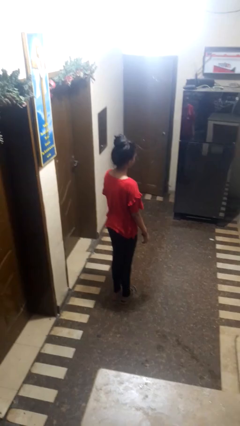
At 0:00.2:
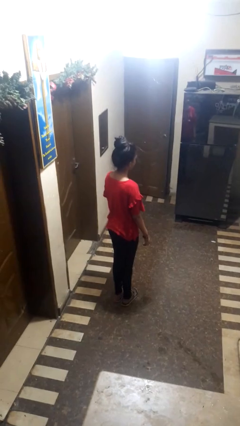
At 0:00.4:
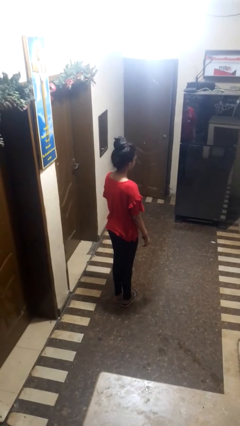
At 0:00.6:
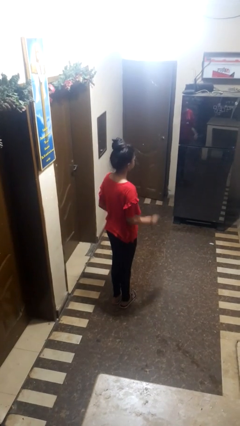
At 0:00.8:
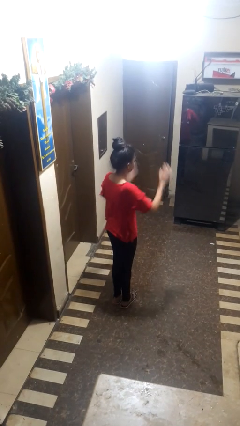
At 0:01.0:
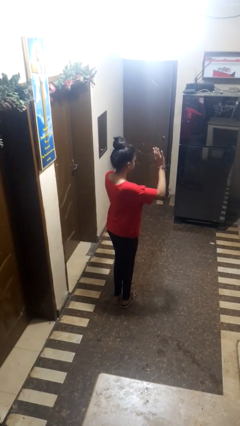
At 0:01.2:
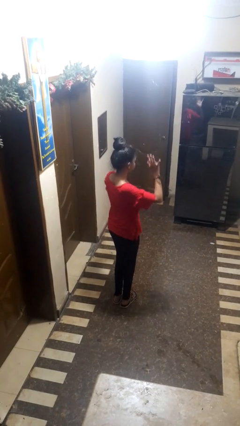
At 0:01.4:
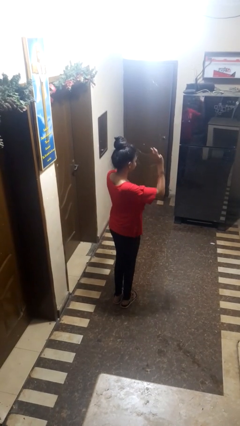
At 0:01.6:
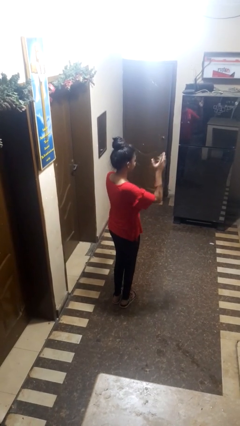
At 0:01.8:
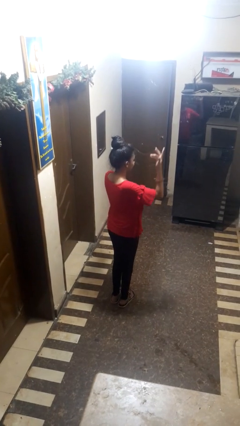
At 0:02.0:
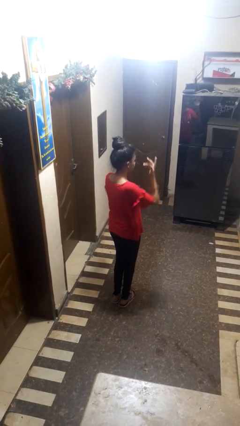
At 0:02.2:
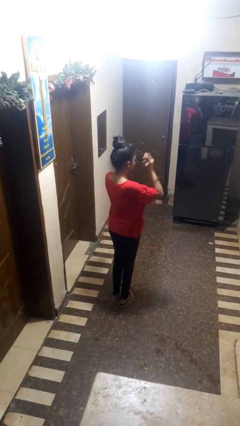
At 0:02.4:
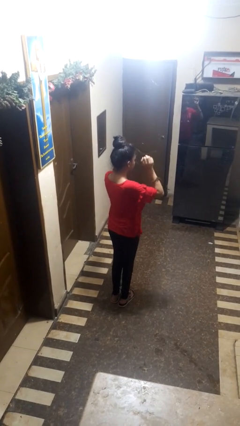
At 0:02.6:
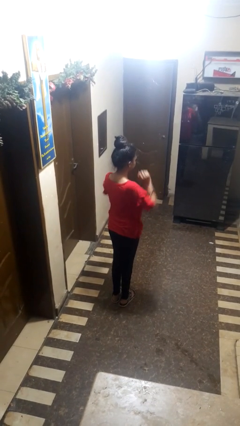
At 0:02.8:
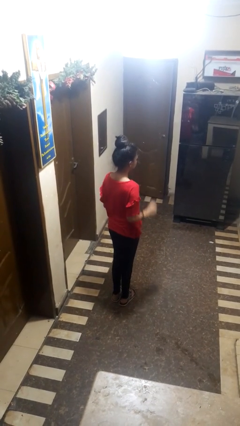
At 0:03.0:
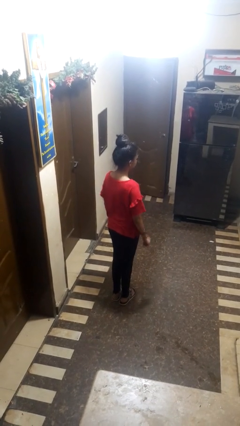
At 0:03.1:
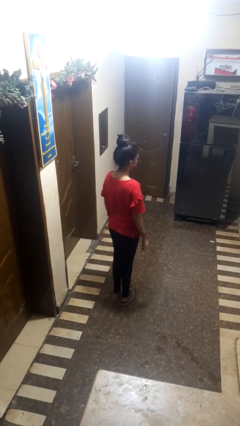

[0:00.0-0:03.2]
person dances in place

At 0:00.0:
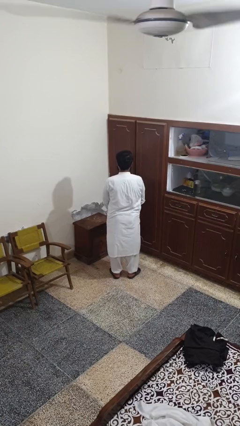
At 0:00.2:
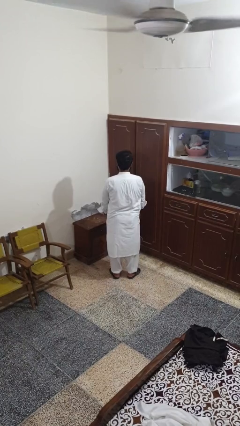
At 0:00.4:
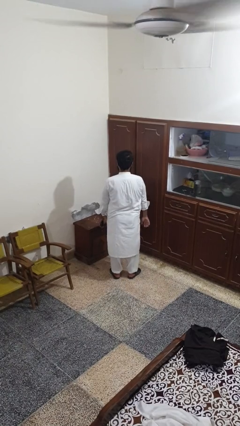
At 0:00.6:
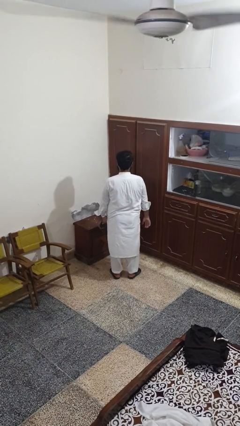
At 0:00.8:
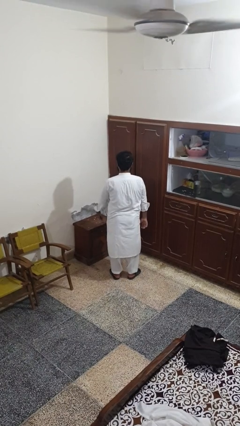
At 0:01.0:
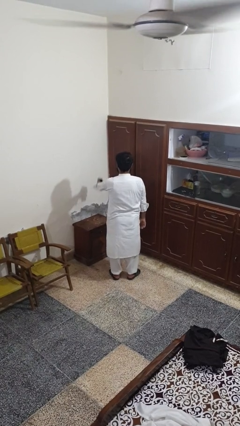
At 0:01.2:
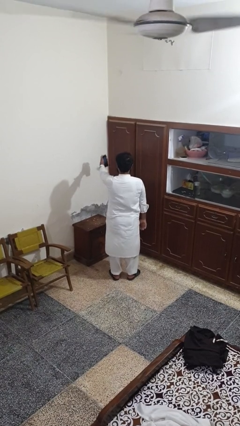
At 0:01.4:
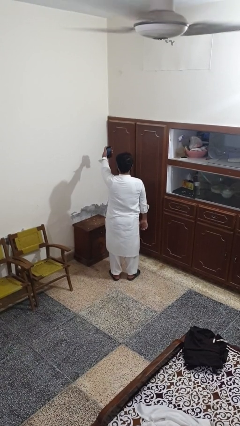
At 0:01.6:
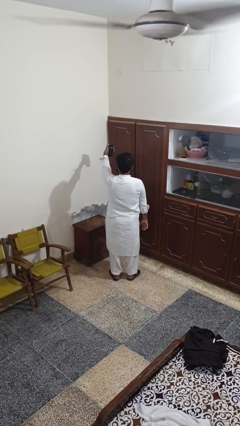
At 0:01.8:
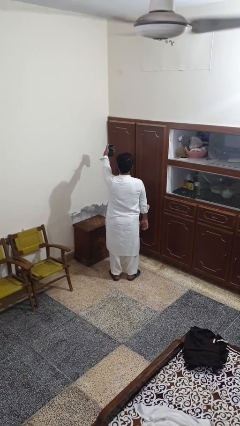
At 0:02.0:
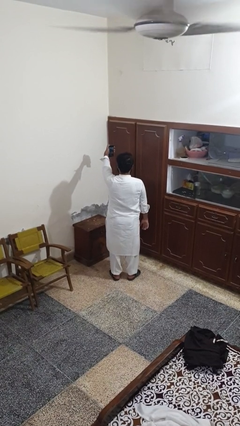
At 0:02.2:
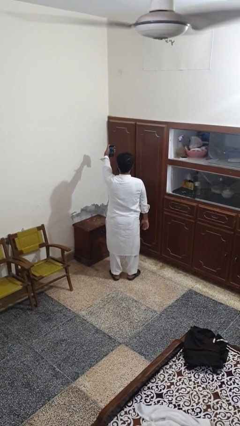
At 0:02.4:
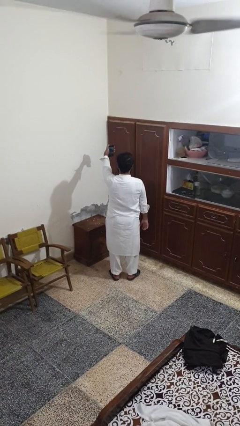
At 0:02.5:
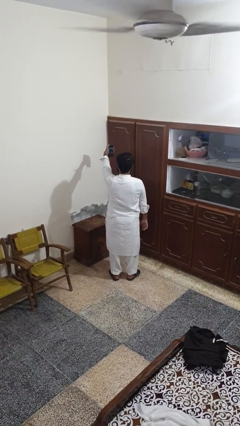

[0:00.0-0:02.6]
person takes selfie

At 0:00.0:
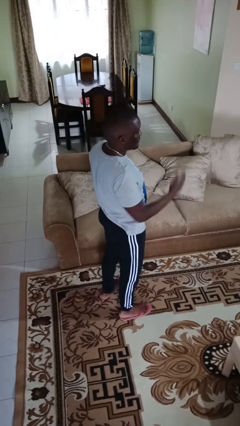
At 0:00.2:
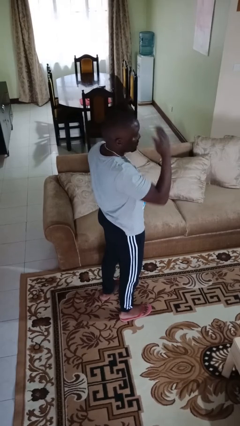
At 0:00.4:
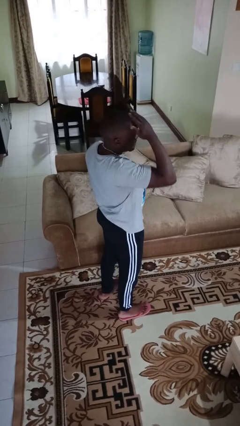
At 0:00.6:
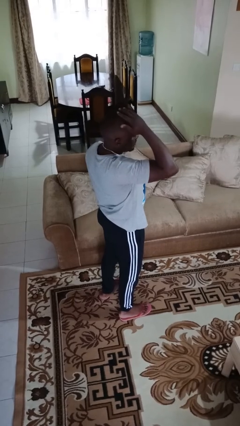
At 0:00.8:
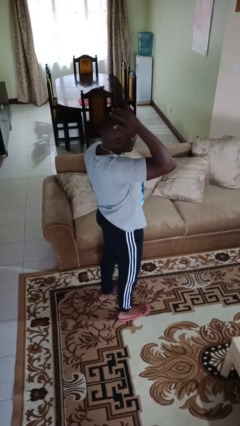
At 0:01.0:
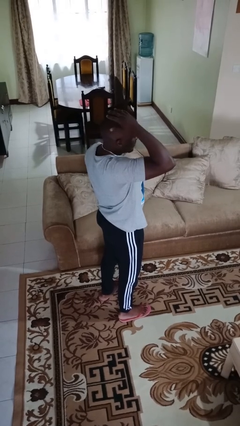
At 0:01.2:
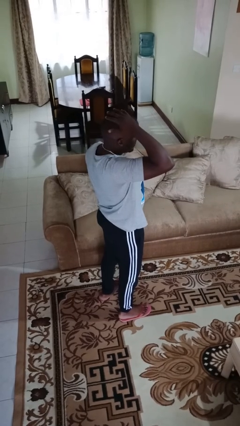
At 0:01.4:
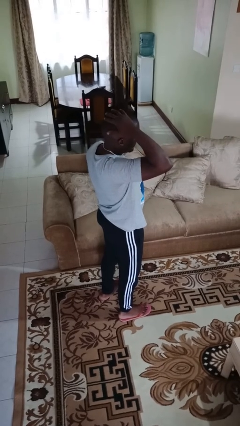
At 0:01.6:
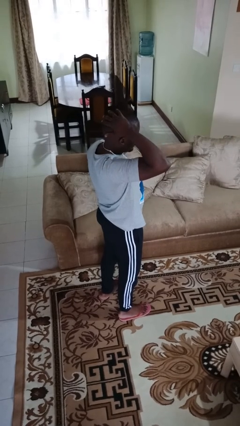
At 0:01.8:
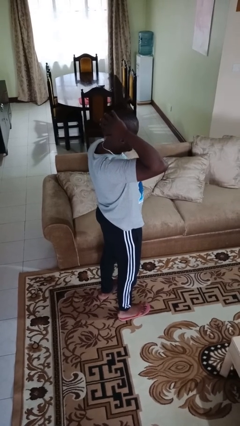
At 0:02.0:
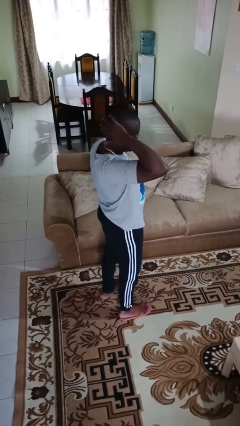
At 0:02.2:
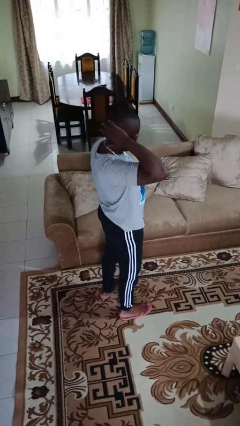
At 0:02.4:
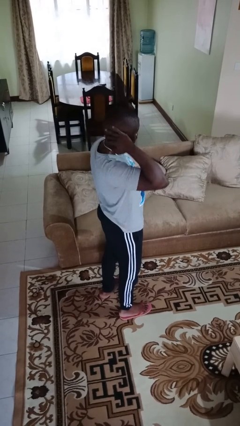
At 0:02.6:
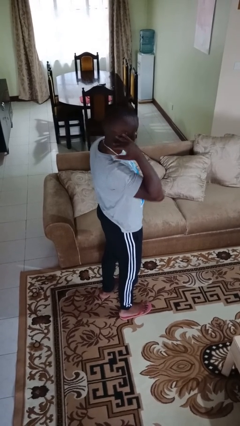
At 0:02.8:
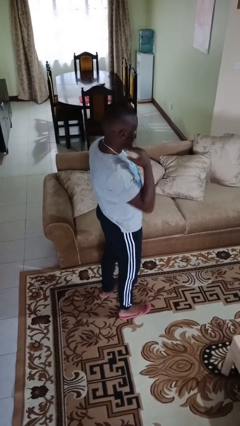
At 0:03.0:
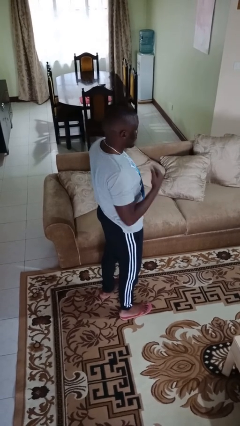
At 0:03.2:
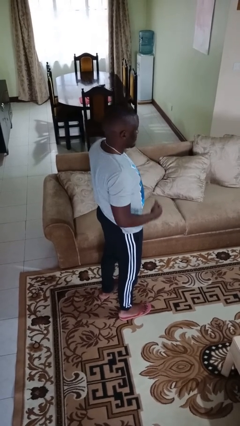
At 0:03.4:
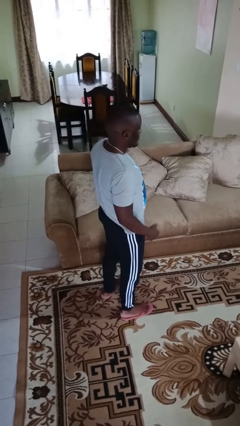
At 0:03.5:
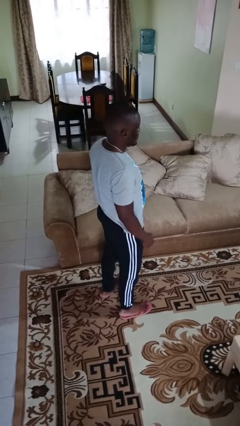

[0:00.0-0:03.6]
person strokes hair

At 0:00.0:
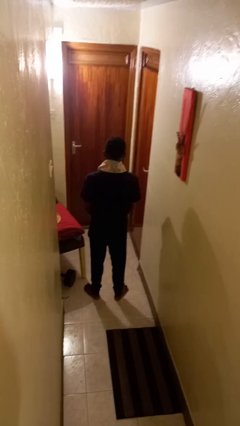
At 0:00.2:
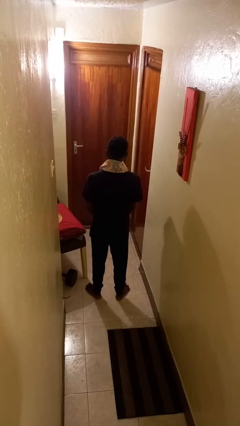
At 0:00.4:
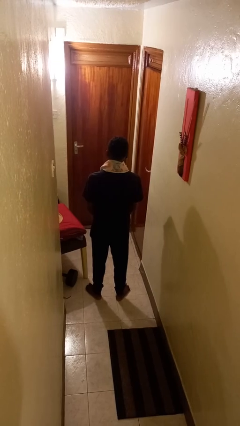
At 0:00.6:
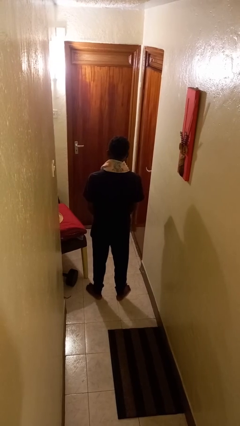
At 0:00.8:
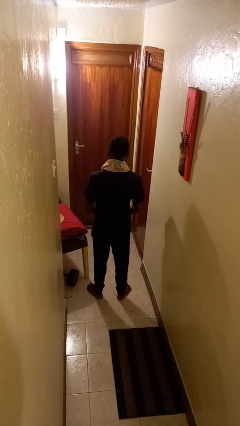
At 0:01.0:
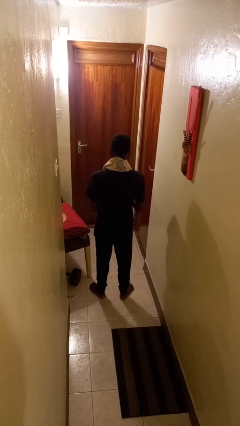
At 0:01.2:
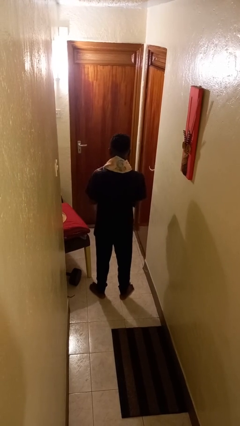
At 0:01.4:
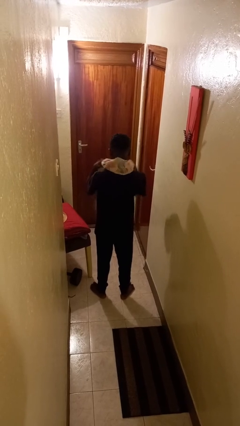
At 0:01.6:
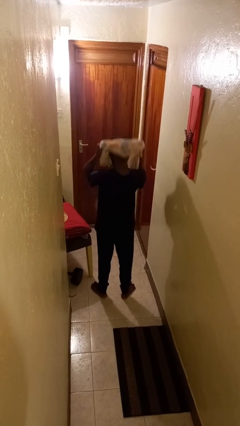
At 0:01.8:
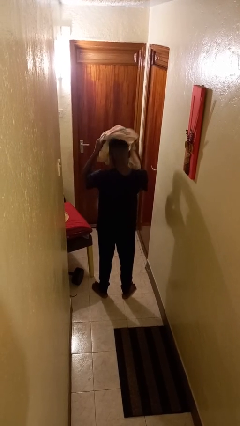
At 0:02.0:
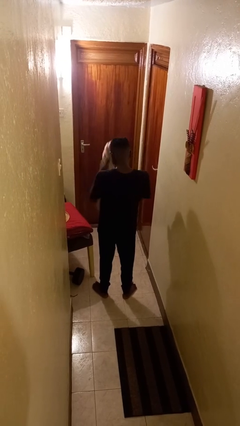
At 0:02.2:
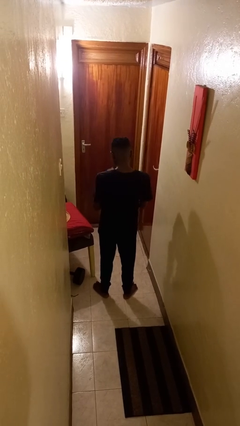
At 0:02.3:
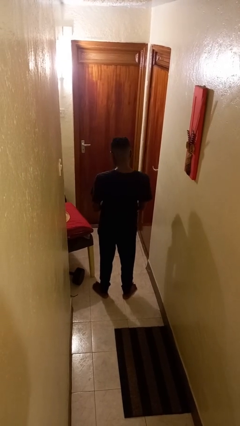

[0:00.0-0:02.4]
person takes off scarf

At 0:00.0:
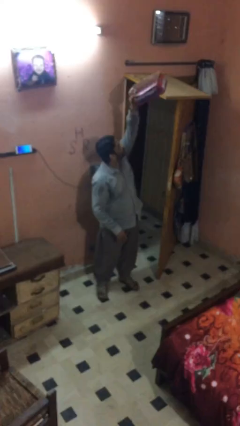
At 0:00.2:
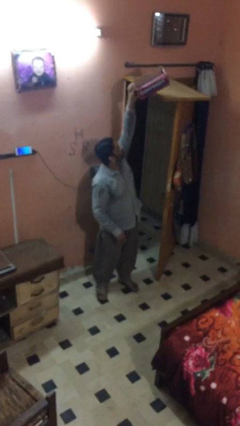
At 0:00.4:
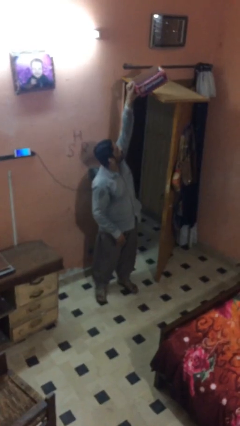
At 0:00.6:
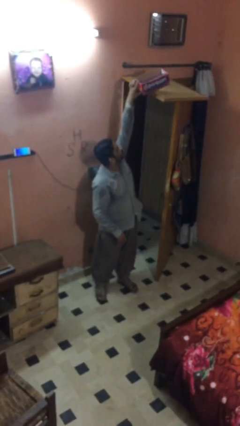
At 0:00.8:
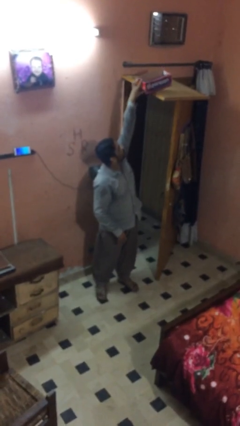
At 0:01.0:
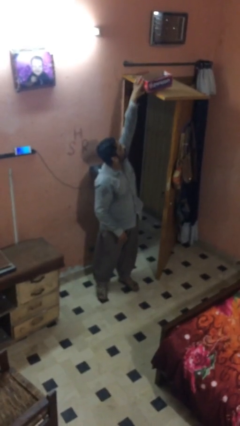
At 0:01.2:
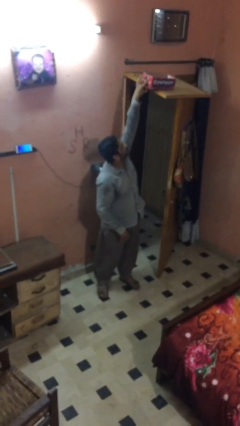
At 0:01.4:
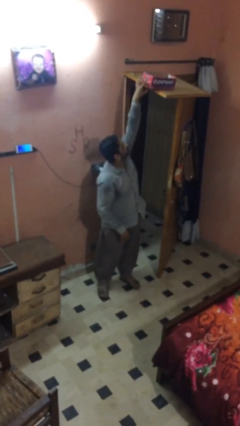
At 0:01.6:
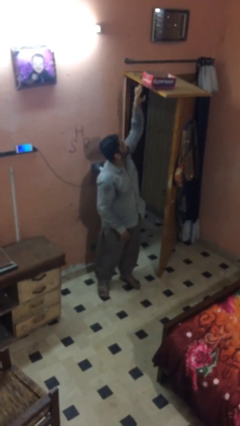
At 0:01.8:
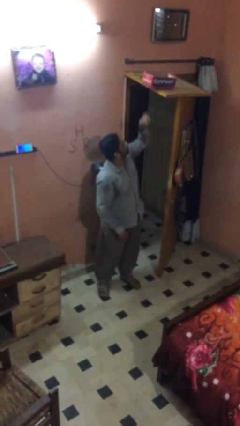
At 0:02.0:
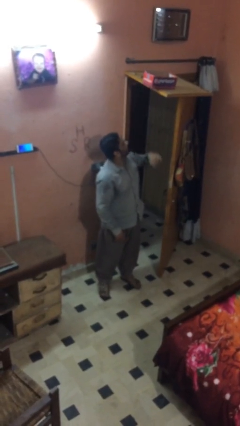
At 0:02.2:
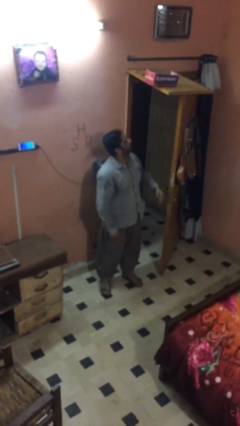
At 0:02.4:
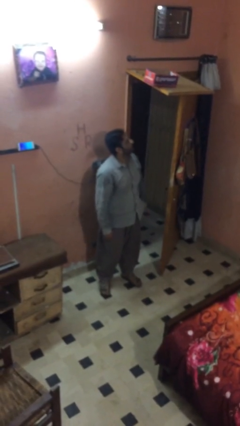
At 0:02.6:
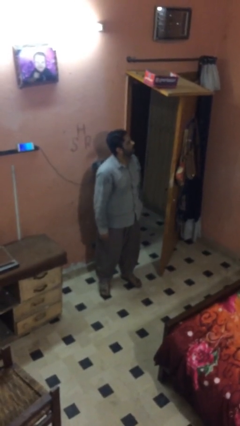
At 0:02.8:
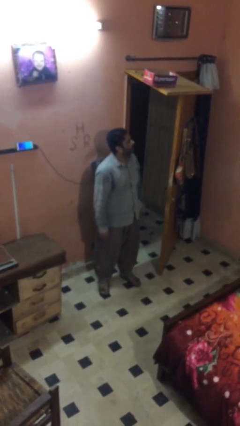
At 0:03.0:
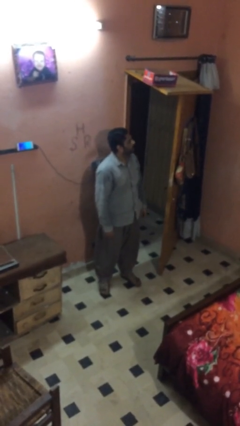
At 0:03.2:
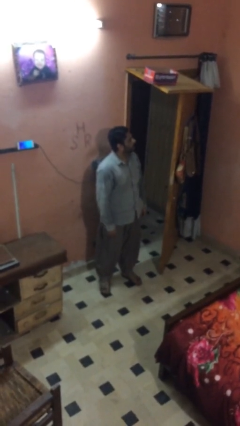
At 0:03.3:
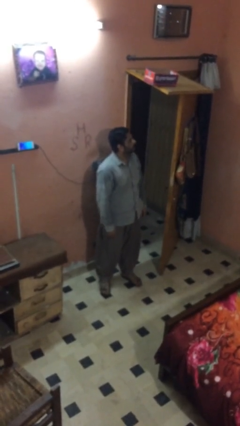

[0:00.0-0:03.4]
person puts down object on shelf

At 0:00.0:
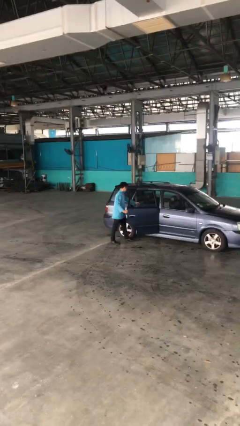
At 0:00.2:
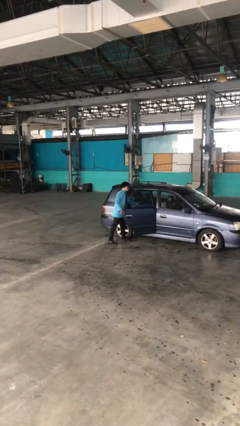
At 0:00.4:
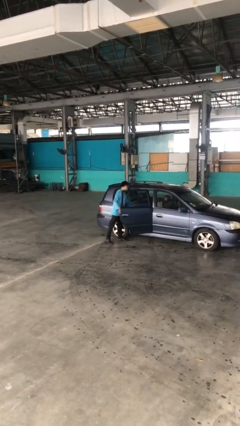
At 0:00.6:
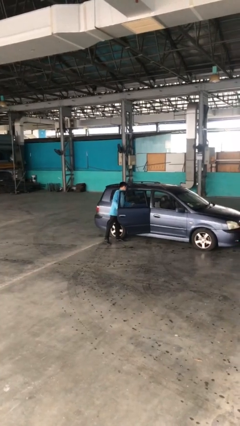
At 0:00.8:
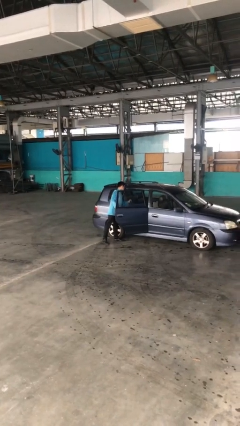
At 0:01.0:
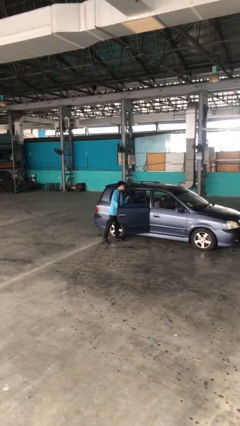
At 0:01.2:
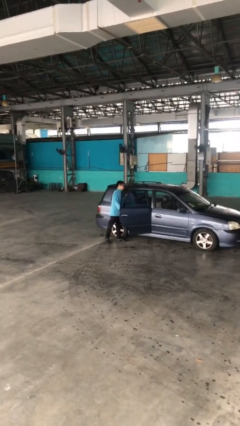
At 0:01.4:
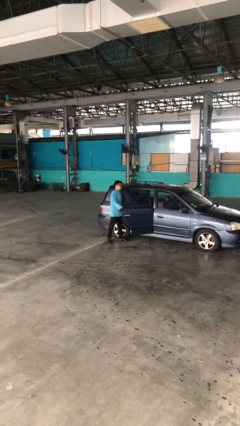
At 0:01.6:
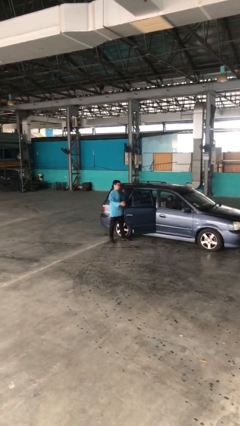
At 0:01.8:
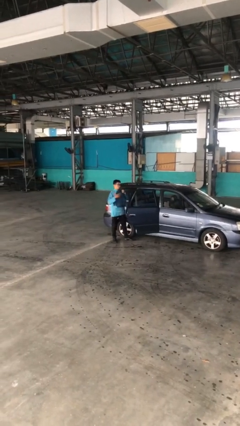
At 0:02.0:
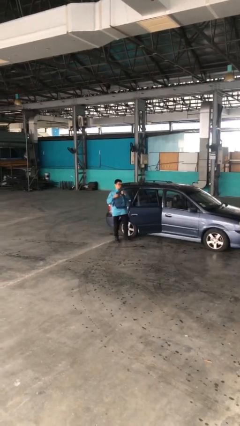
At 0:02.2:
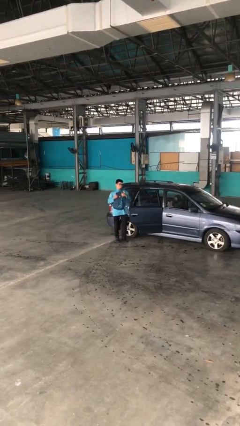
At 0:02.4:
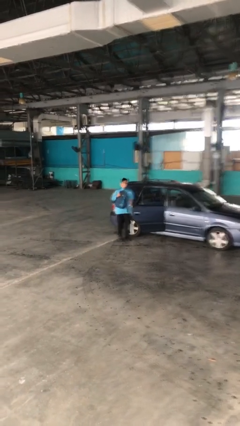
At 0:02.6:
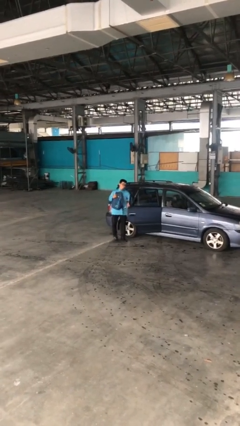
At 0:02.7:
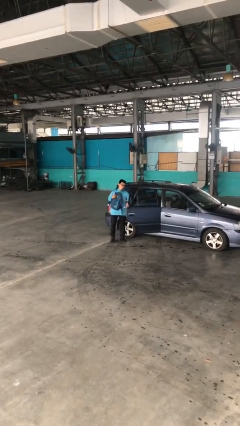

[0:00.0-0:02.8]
person unloads car
